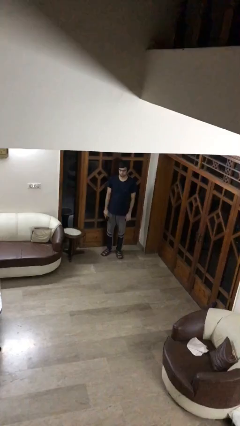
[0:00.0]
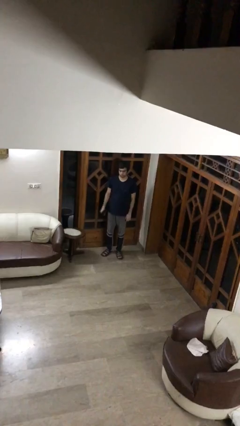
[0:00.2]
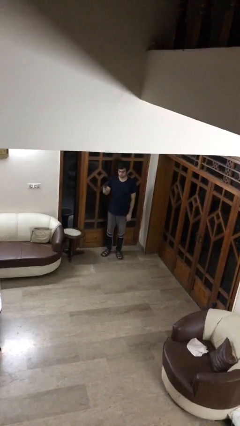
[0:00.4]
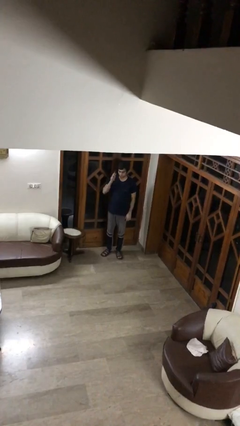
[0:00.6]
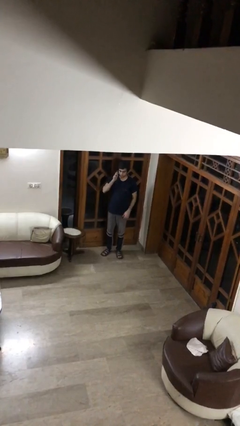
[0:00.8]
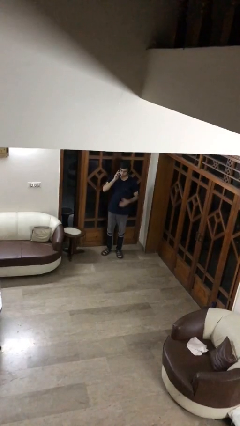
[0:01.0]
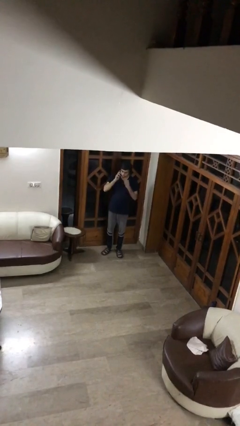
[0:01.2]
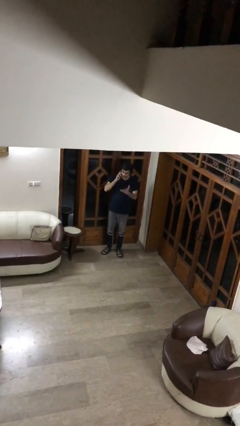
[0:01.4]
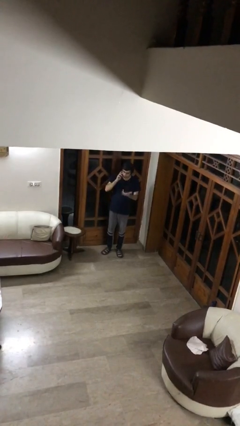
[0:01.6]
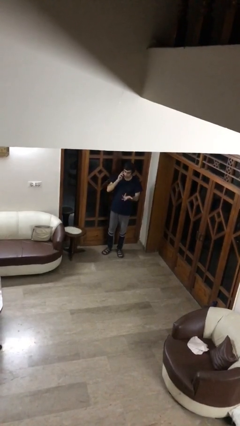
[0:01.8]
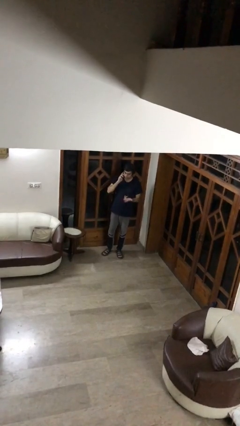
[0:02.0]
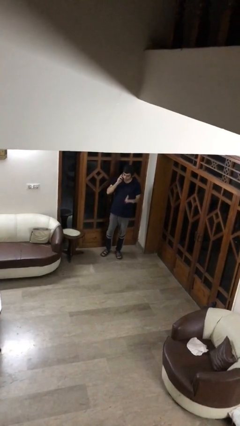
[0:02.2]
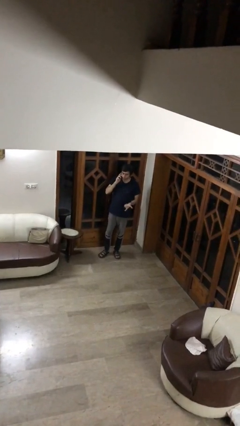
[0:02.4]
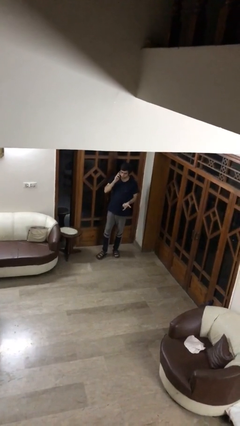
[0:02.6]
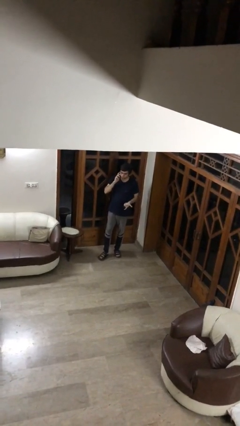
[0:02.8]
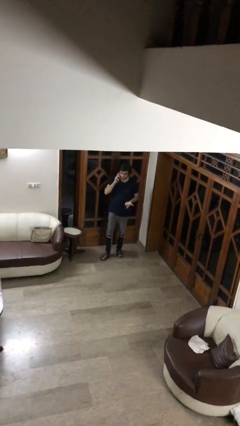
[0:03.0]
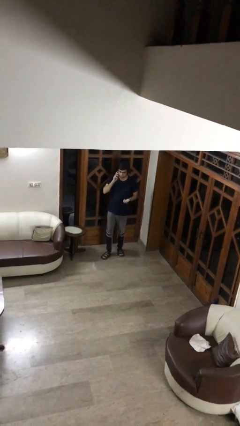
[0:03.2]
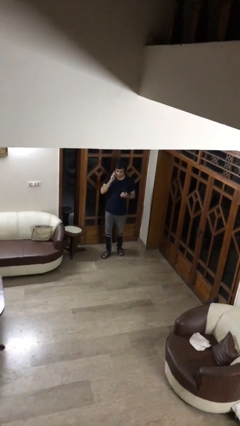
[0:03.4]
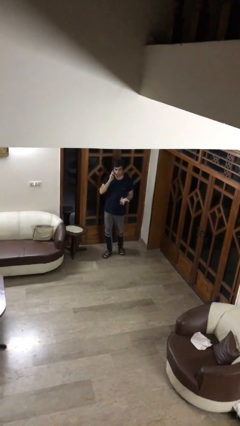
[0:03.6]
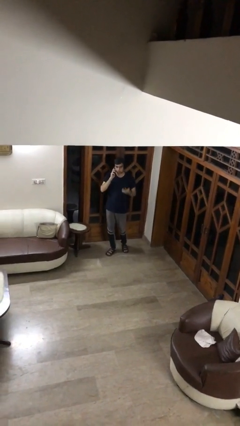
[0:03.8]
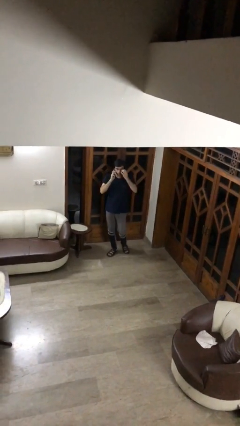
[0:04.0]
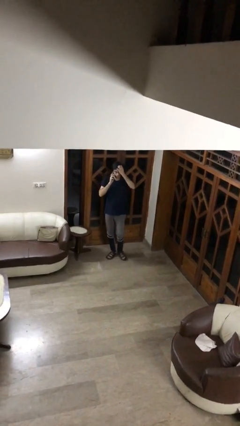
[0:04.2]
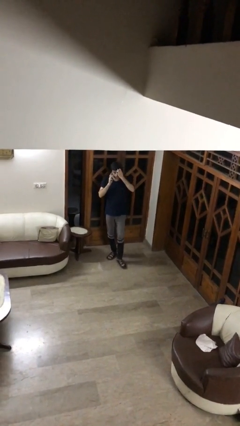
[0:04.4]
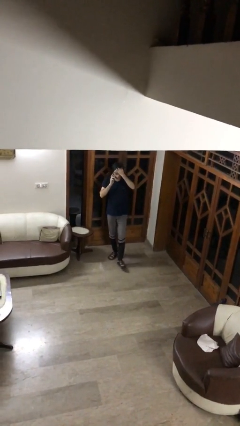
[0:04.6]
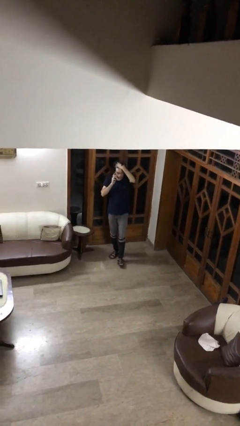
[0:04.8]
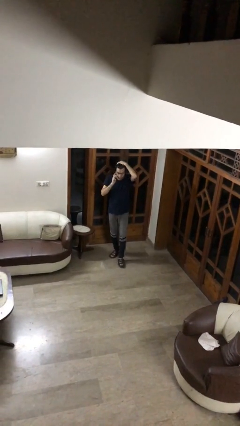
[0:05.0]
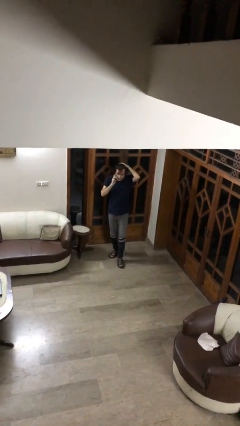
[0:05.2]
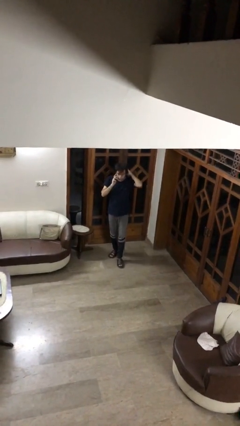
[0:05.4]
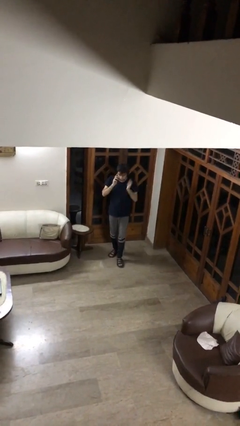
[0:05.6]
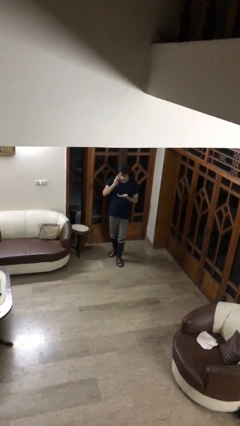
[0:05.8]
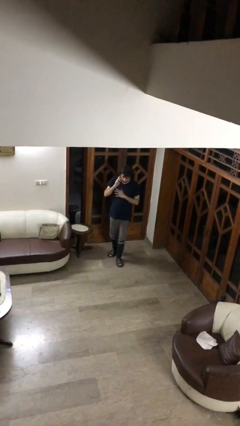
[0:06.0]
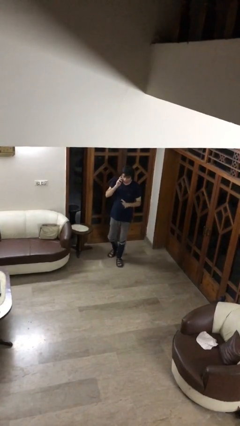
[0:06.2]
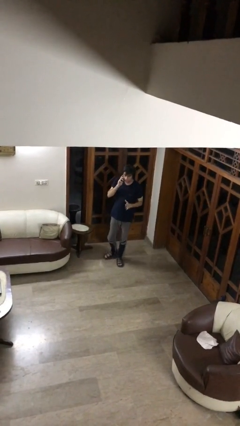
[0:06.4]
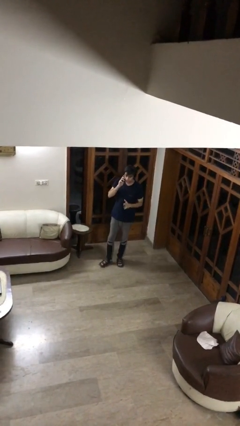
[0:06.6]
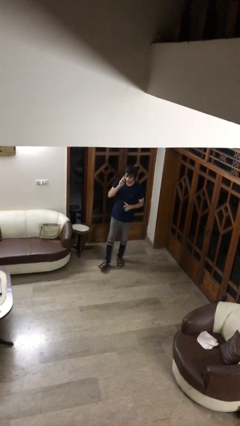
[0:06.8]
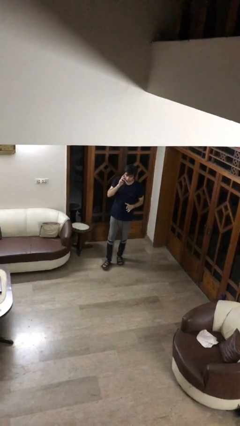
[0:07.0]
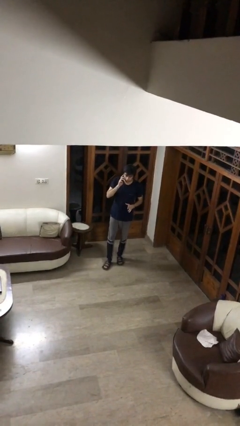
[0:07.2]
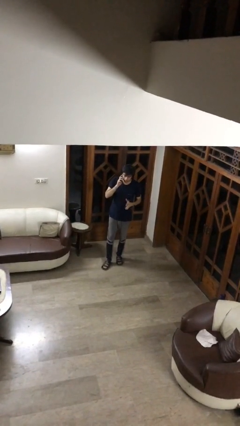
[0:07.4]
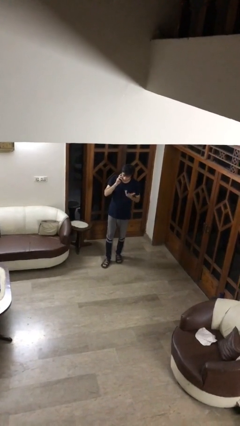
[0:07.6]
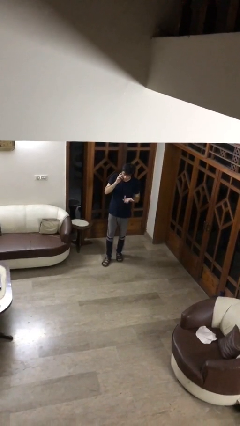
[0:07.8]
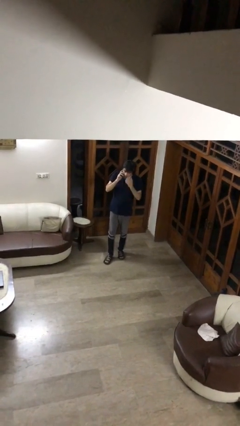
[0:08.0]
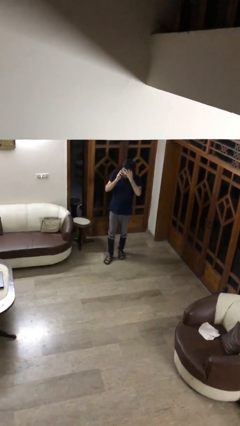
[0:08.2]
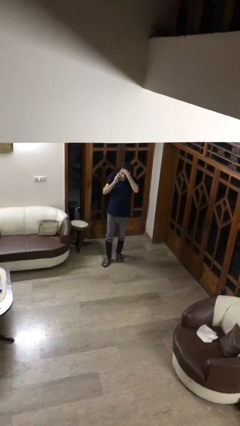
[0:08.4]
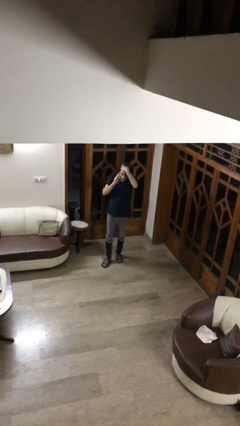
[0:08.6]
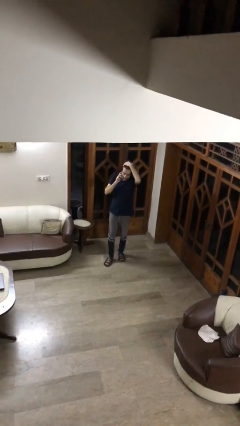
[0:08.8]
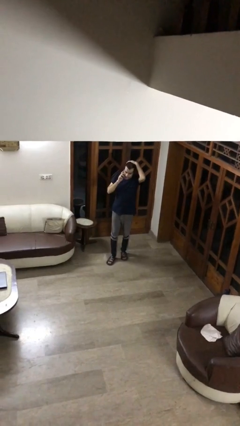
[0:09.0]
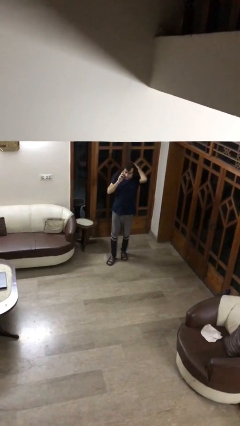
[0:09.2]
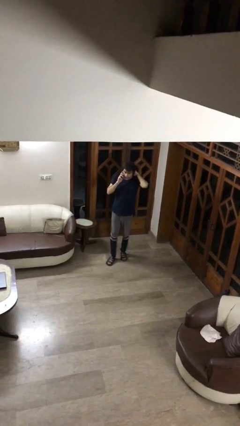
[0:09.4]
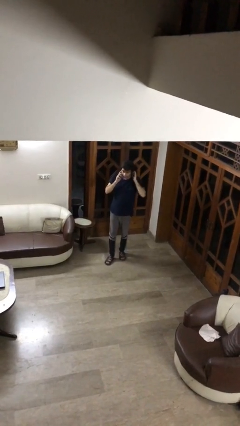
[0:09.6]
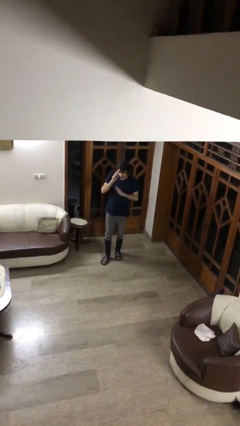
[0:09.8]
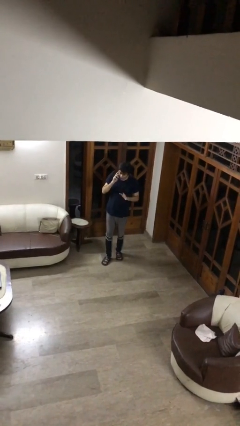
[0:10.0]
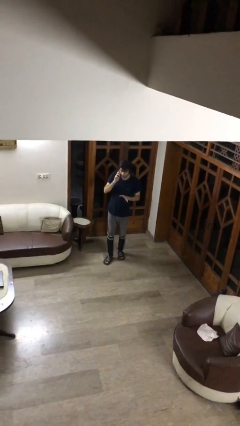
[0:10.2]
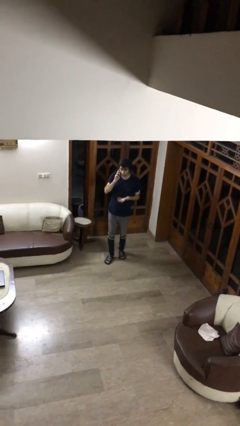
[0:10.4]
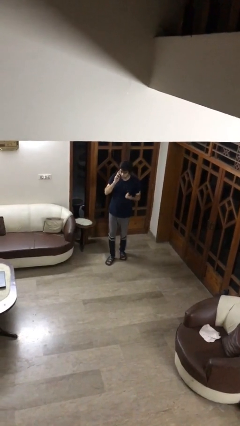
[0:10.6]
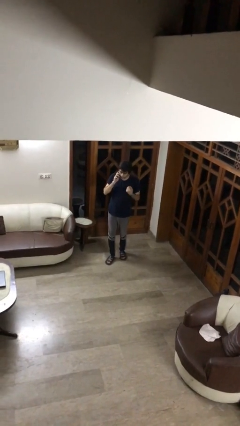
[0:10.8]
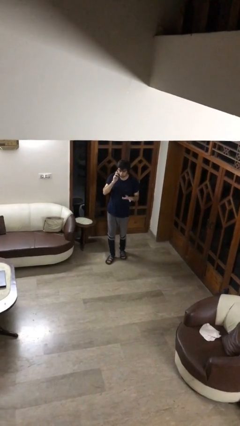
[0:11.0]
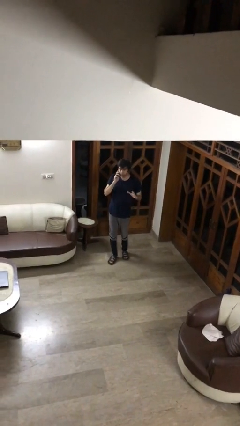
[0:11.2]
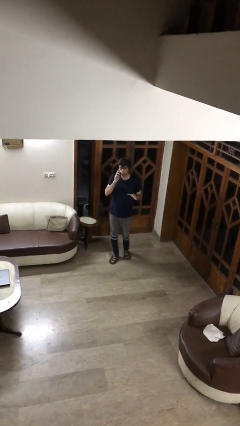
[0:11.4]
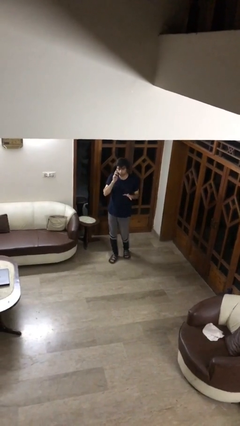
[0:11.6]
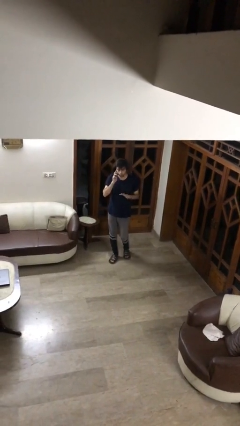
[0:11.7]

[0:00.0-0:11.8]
person talks on phone

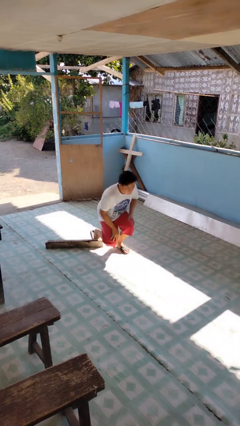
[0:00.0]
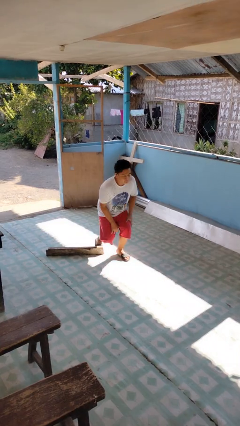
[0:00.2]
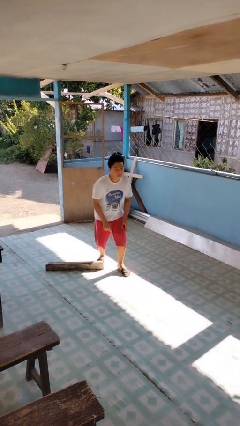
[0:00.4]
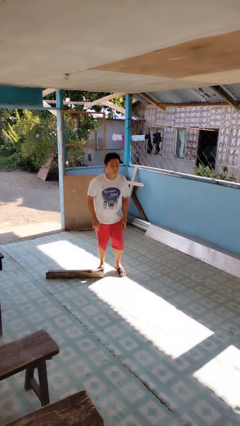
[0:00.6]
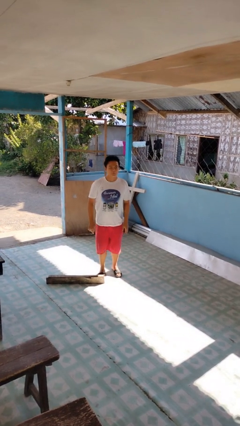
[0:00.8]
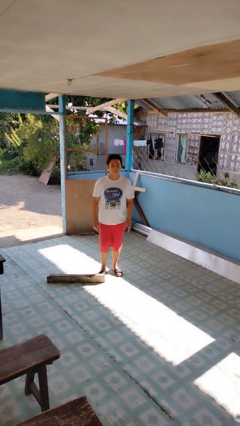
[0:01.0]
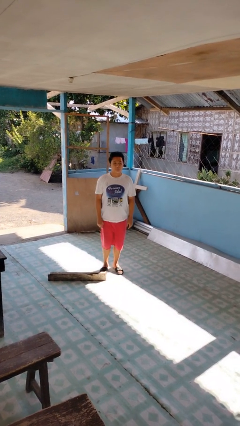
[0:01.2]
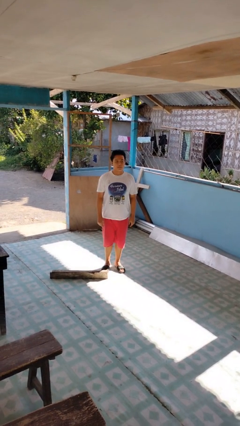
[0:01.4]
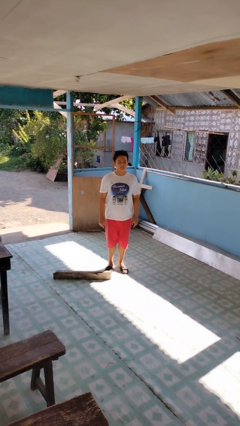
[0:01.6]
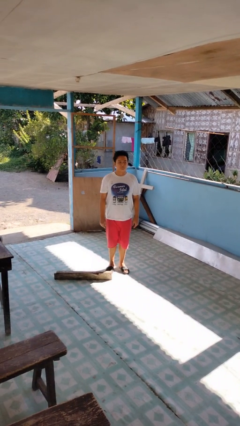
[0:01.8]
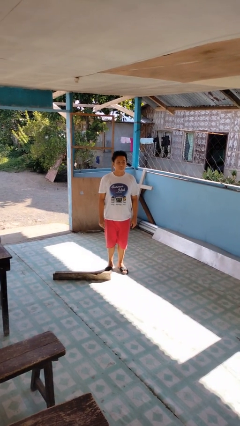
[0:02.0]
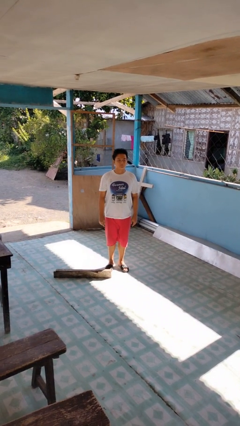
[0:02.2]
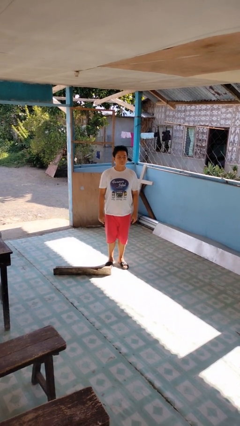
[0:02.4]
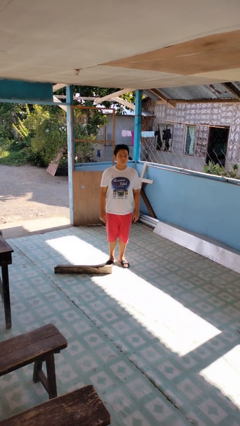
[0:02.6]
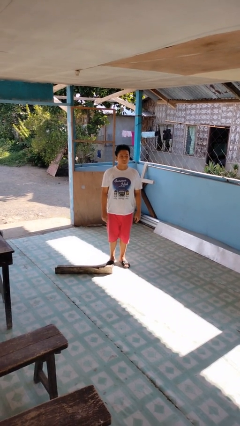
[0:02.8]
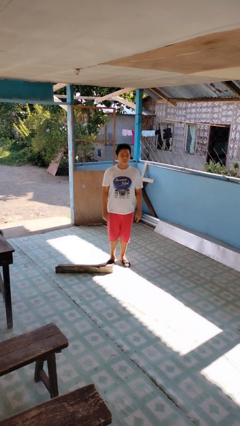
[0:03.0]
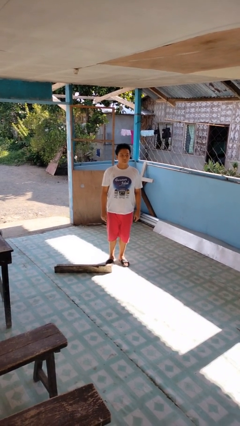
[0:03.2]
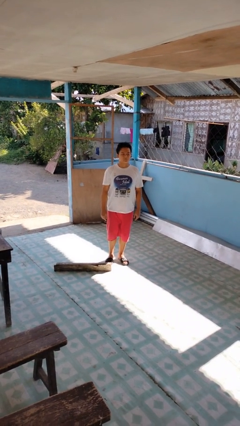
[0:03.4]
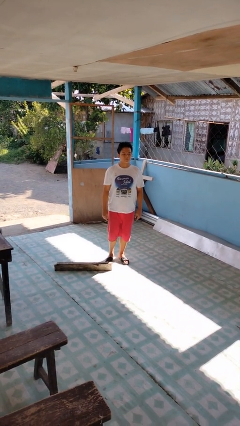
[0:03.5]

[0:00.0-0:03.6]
person stands up from floor

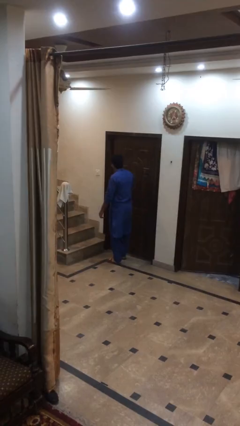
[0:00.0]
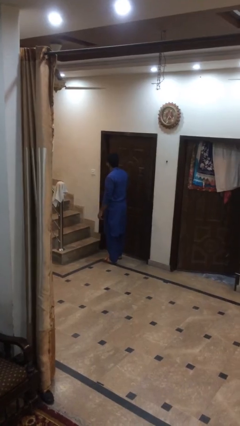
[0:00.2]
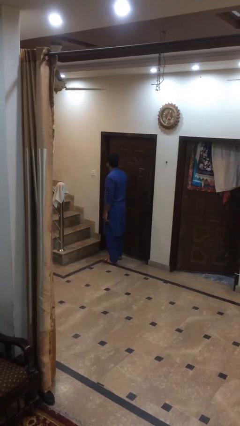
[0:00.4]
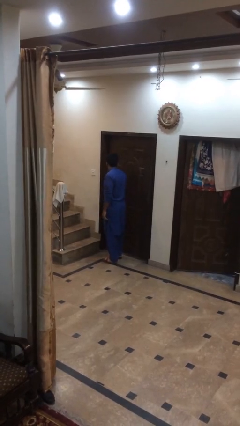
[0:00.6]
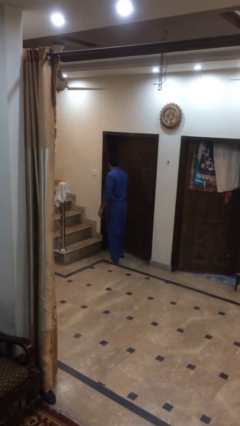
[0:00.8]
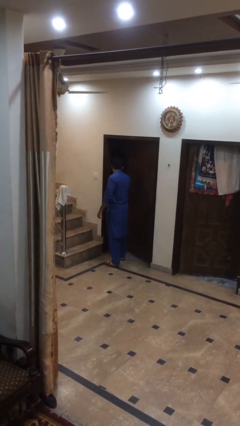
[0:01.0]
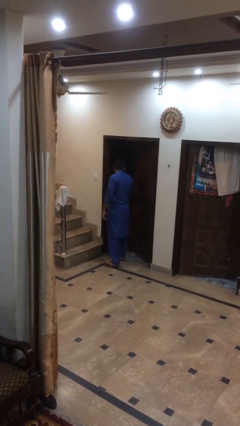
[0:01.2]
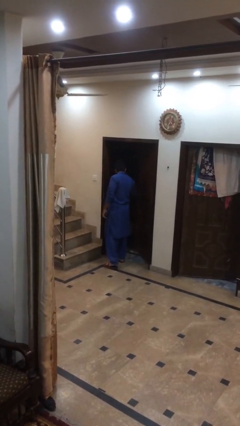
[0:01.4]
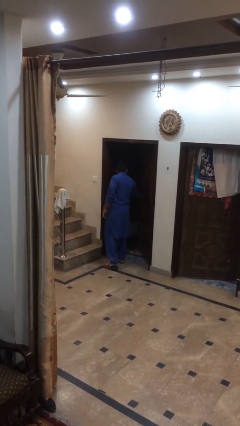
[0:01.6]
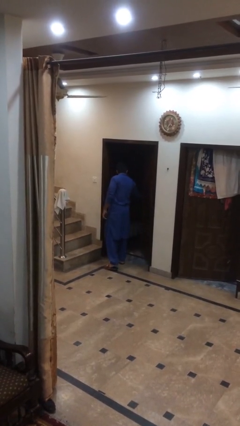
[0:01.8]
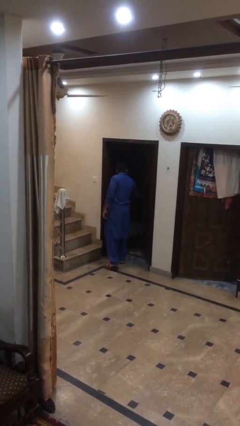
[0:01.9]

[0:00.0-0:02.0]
person opens facility door
